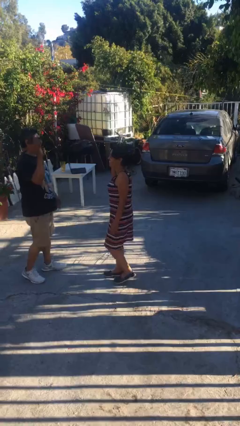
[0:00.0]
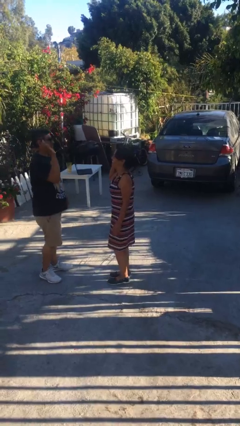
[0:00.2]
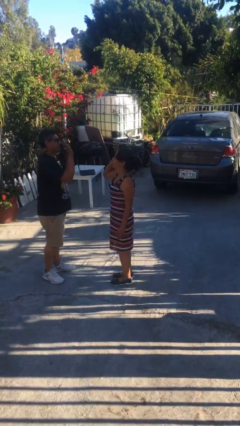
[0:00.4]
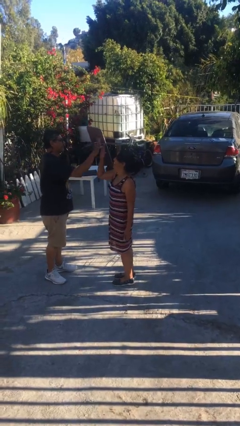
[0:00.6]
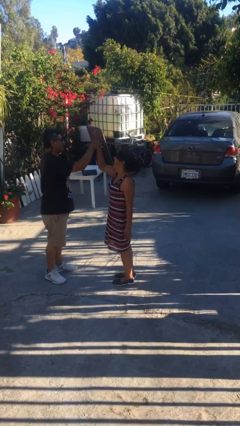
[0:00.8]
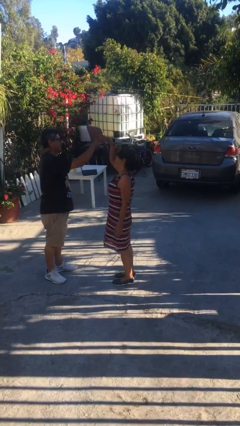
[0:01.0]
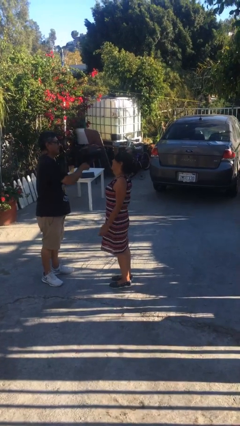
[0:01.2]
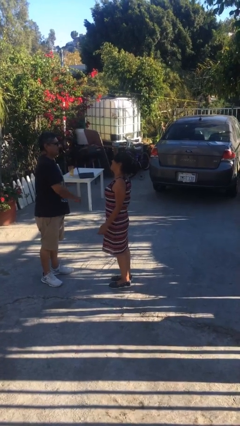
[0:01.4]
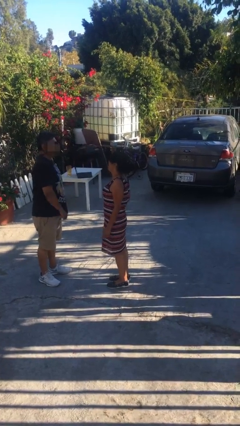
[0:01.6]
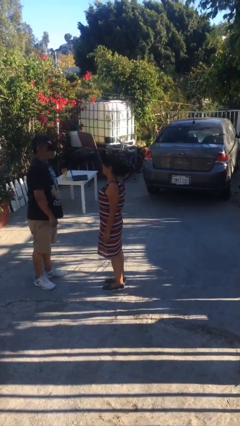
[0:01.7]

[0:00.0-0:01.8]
person highfives hand

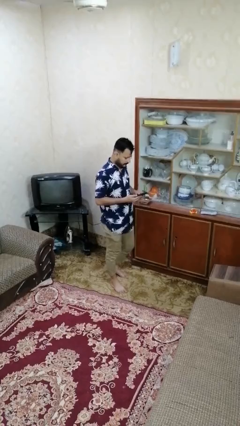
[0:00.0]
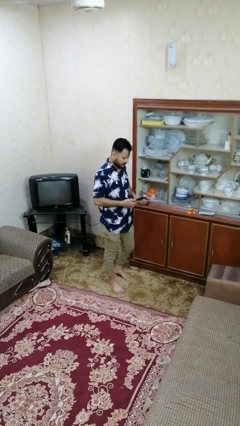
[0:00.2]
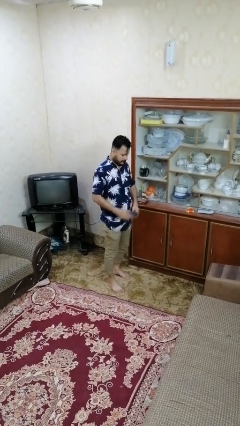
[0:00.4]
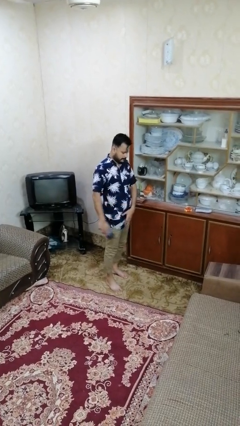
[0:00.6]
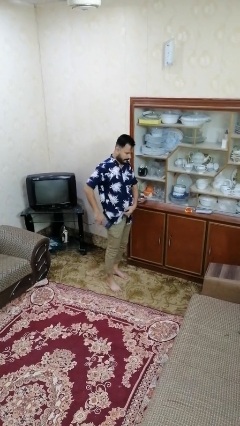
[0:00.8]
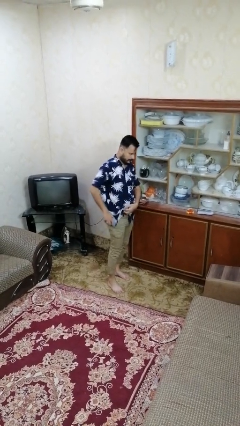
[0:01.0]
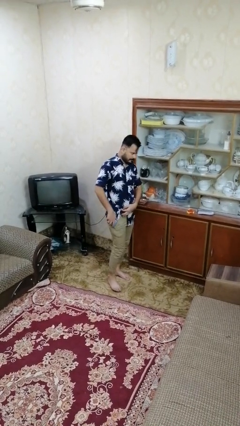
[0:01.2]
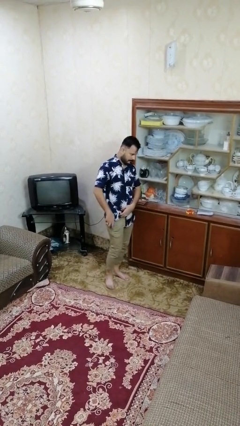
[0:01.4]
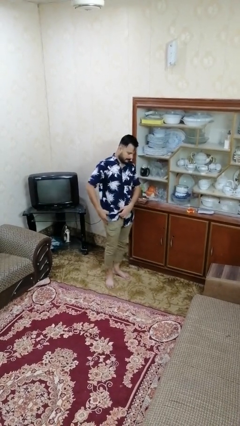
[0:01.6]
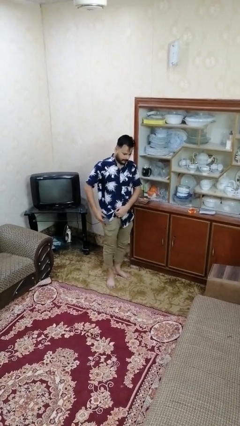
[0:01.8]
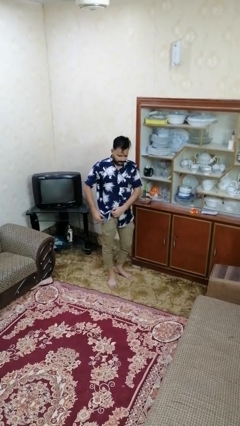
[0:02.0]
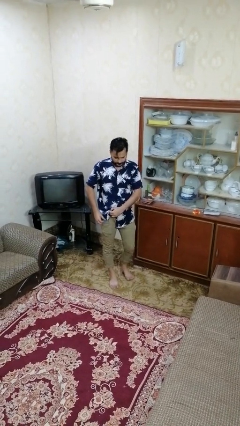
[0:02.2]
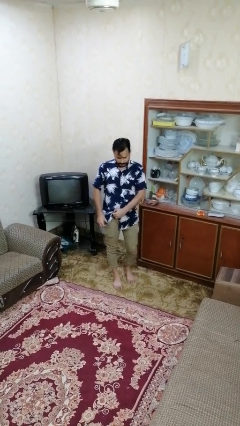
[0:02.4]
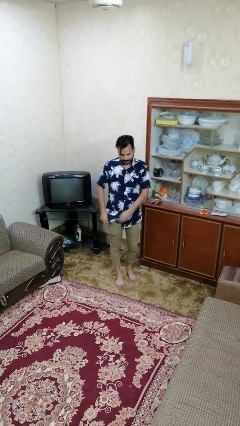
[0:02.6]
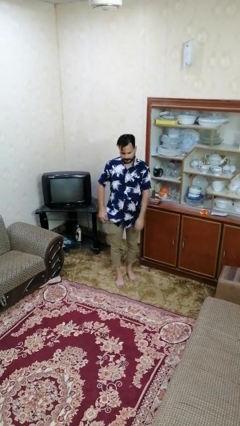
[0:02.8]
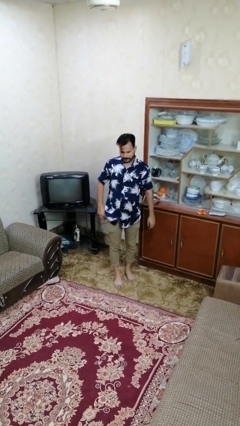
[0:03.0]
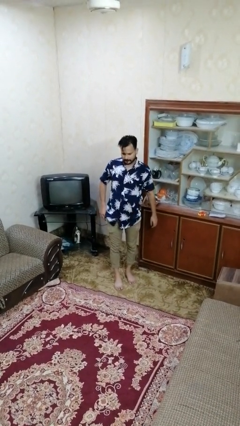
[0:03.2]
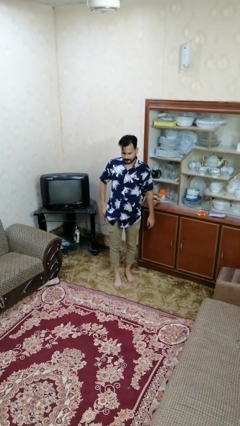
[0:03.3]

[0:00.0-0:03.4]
person puts phone into pocket

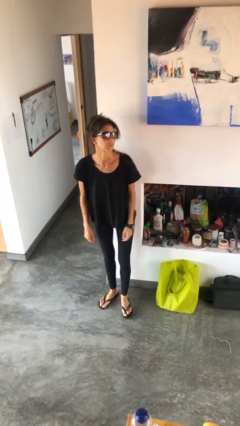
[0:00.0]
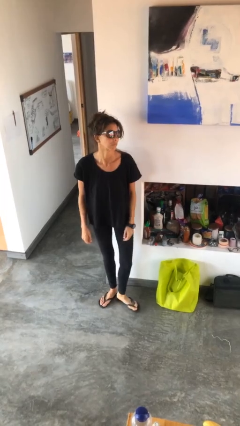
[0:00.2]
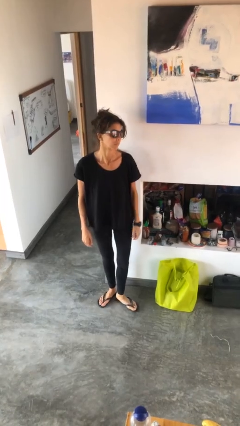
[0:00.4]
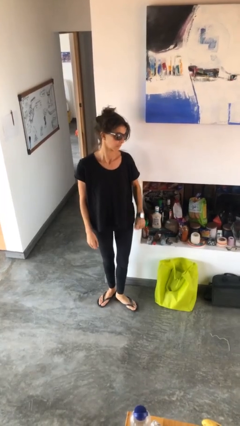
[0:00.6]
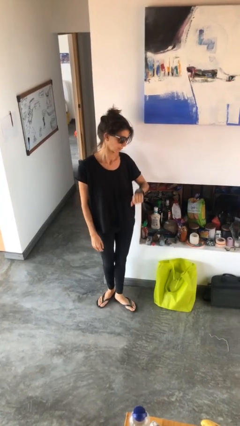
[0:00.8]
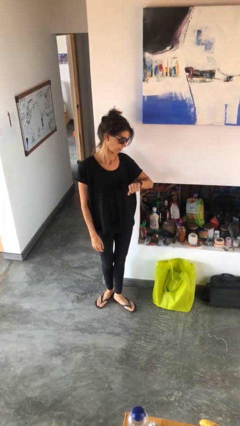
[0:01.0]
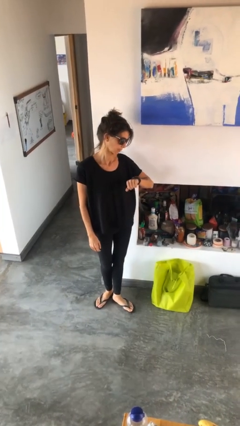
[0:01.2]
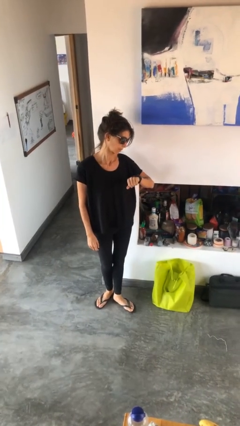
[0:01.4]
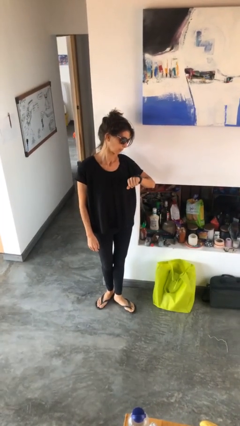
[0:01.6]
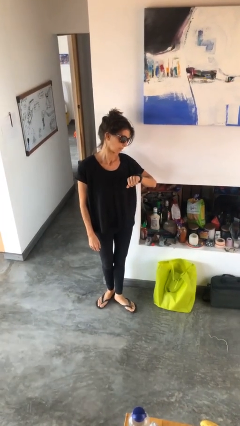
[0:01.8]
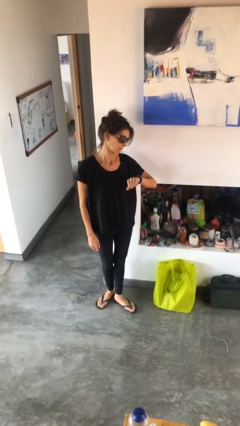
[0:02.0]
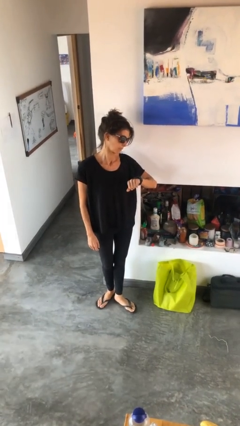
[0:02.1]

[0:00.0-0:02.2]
person looks at wristwatch

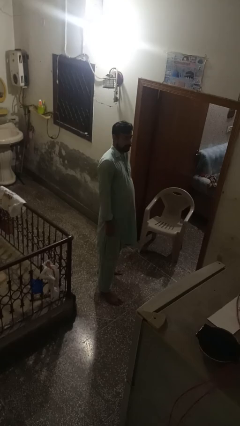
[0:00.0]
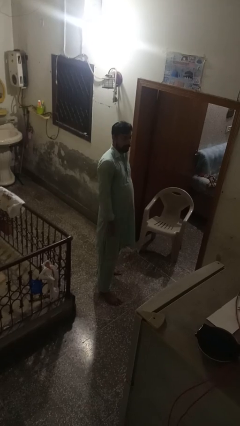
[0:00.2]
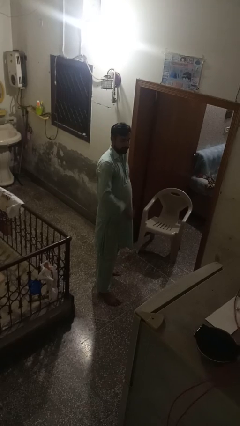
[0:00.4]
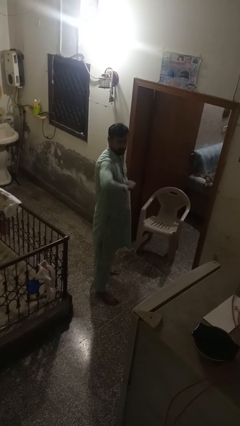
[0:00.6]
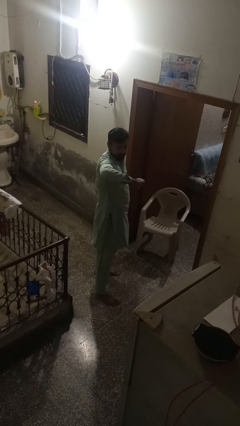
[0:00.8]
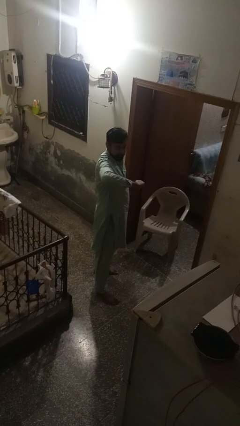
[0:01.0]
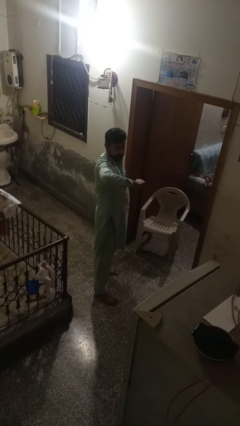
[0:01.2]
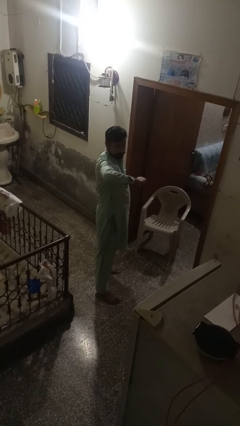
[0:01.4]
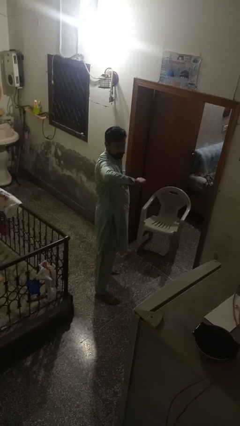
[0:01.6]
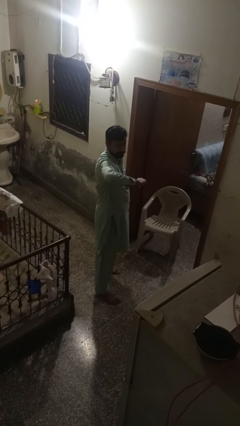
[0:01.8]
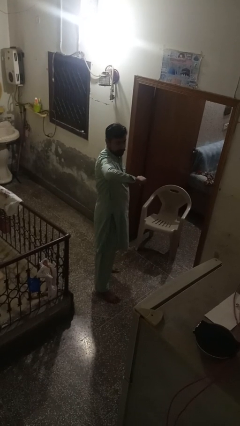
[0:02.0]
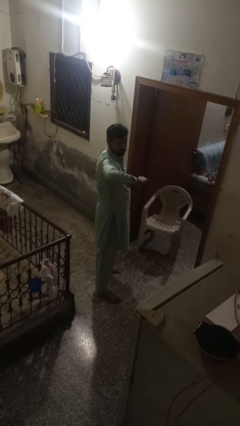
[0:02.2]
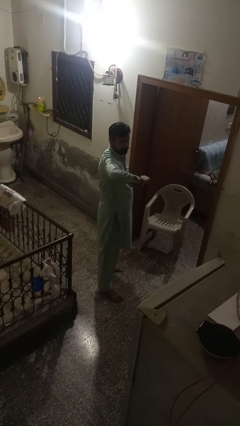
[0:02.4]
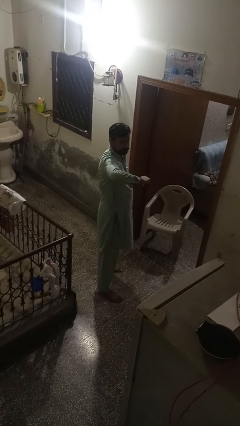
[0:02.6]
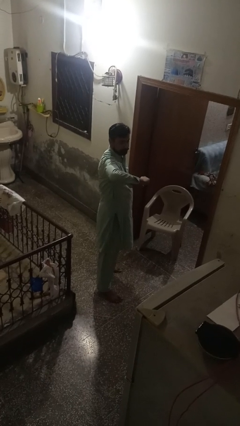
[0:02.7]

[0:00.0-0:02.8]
person karate chop

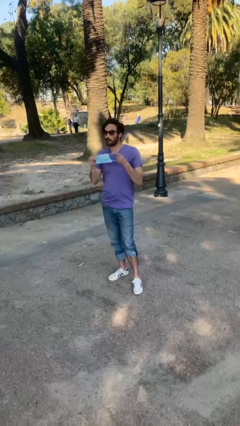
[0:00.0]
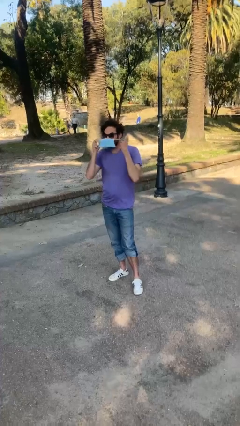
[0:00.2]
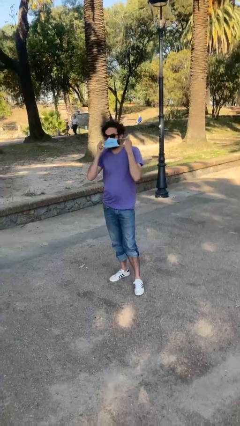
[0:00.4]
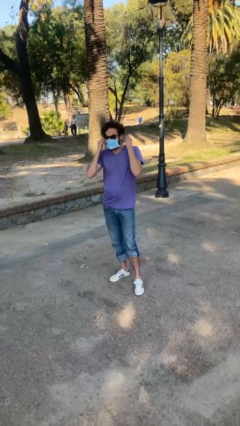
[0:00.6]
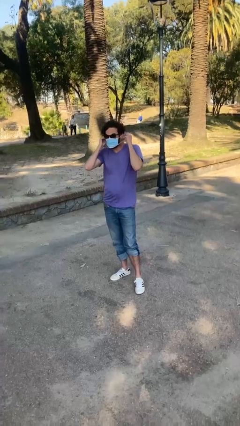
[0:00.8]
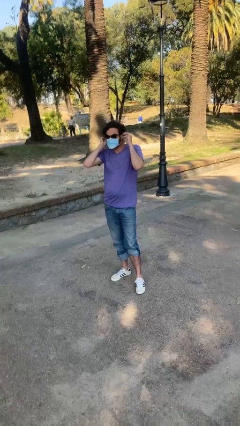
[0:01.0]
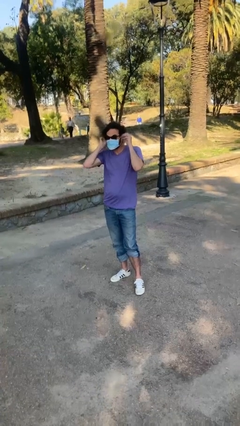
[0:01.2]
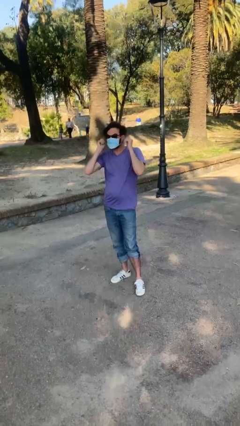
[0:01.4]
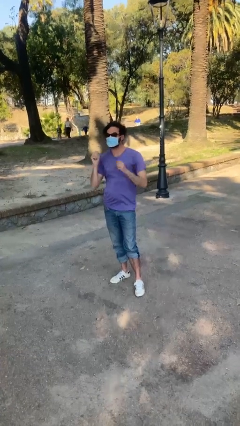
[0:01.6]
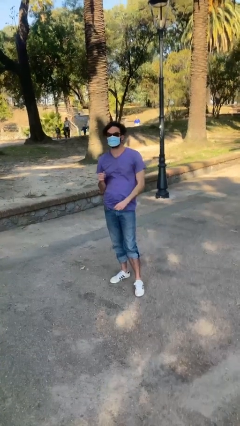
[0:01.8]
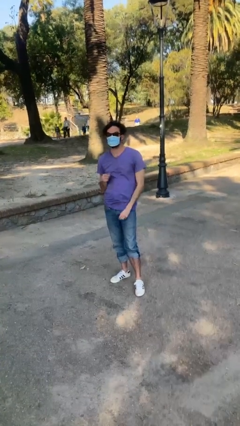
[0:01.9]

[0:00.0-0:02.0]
person puts on facemask

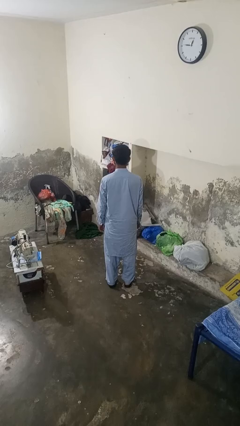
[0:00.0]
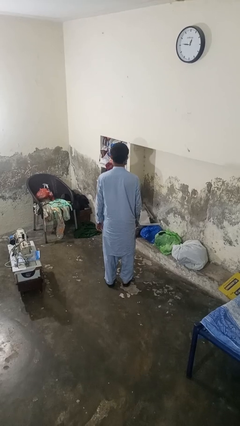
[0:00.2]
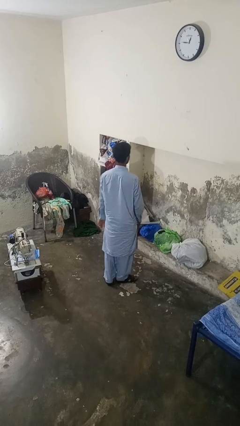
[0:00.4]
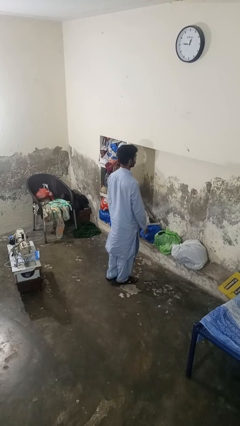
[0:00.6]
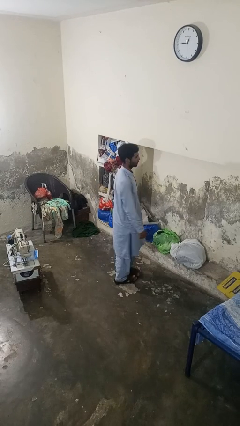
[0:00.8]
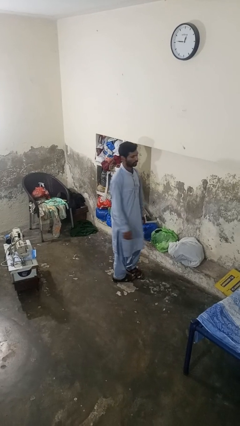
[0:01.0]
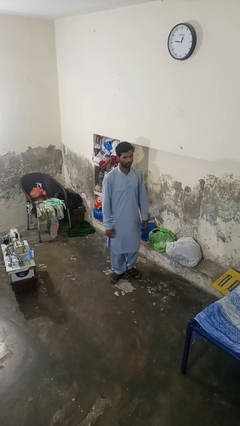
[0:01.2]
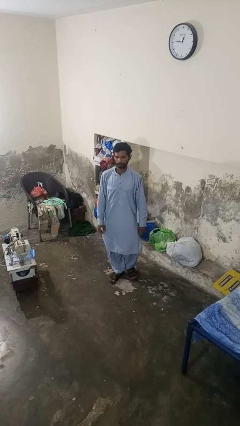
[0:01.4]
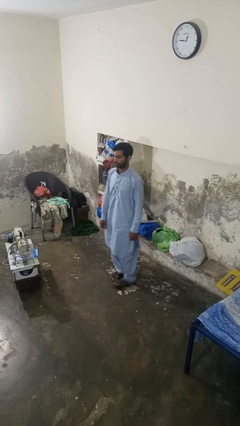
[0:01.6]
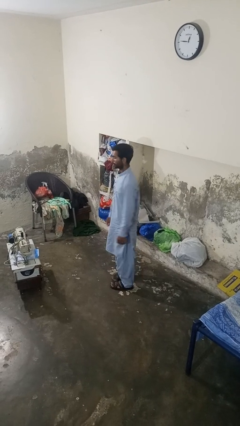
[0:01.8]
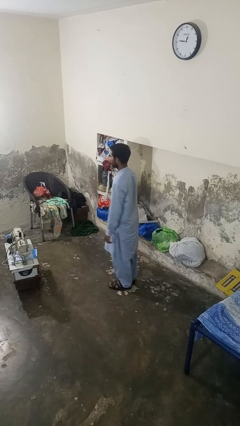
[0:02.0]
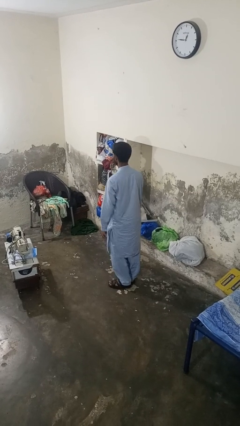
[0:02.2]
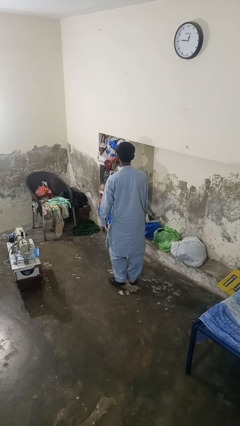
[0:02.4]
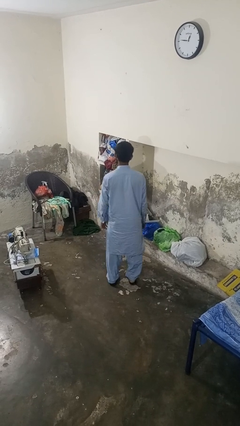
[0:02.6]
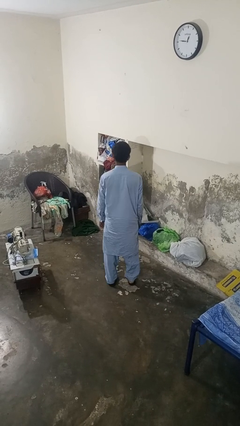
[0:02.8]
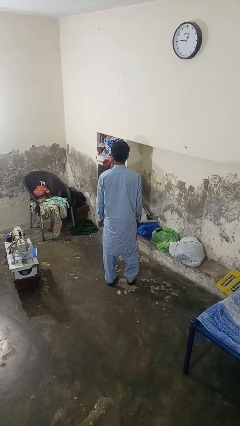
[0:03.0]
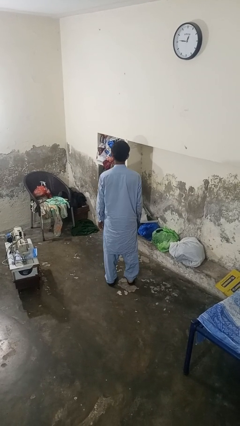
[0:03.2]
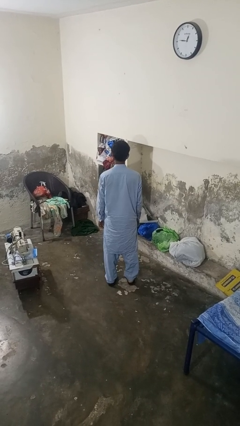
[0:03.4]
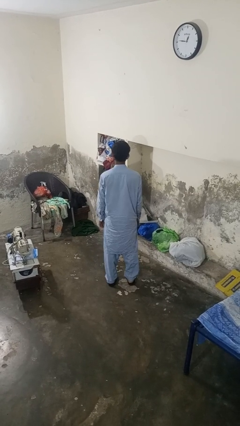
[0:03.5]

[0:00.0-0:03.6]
person twirls

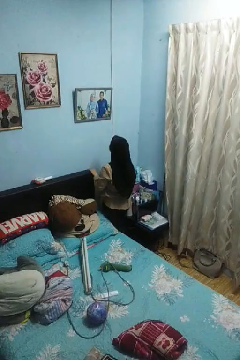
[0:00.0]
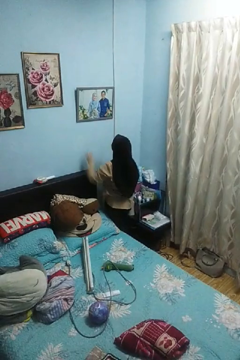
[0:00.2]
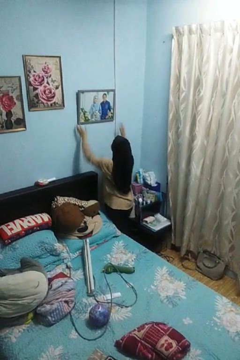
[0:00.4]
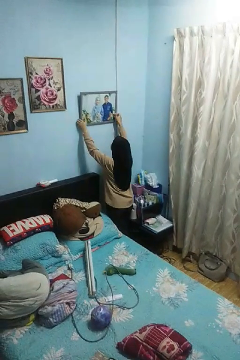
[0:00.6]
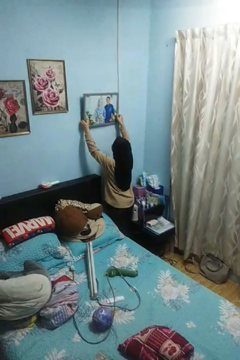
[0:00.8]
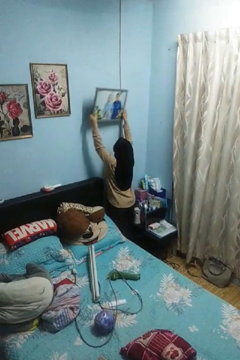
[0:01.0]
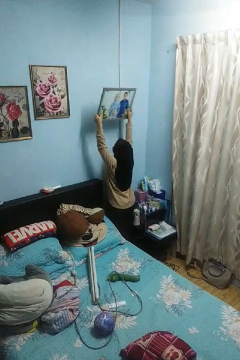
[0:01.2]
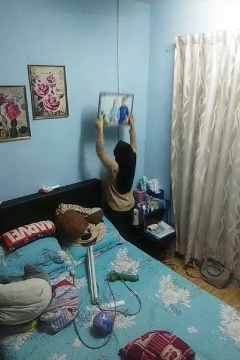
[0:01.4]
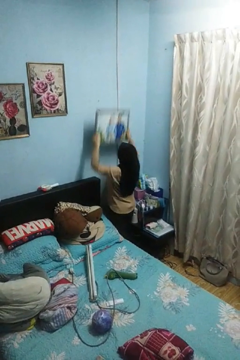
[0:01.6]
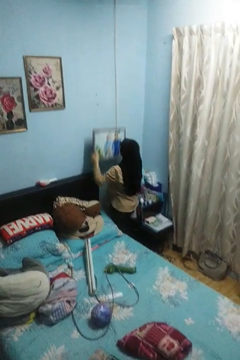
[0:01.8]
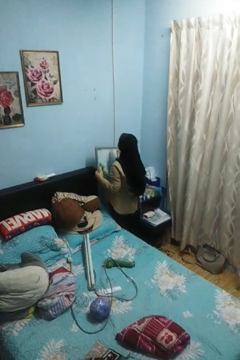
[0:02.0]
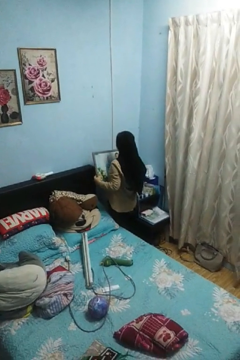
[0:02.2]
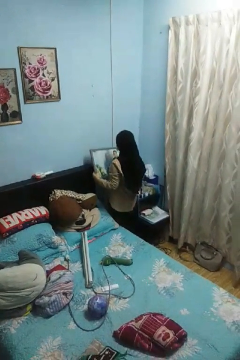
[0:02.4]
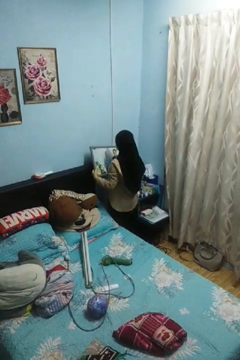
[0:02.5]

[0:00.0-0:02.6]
person takes down picture frame
